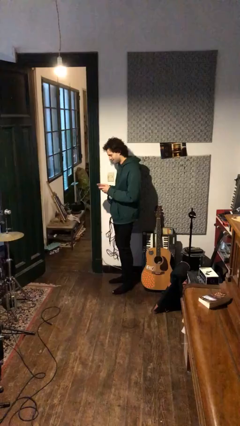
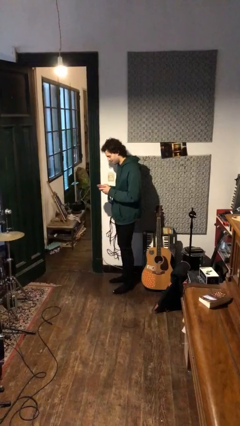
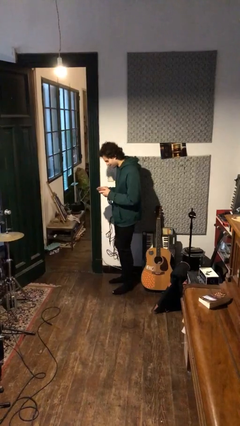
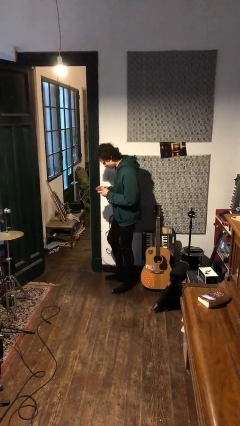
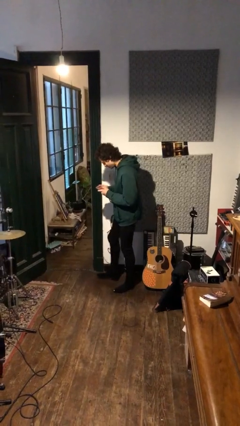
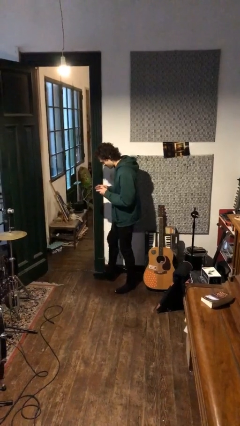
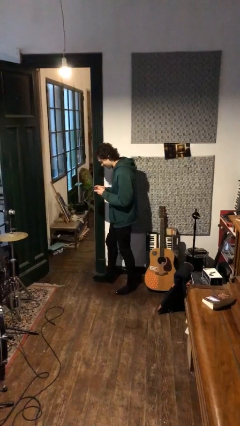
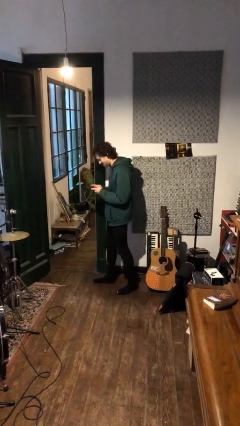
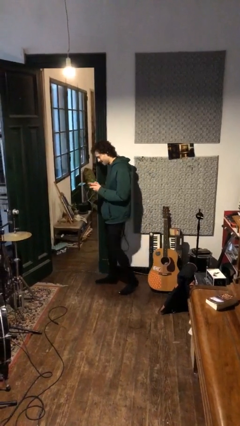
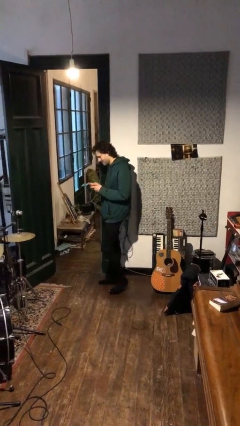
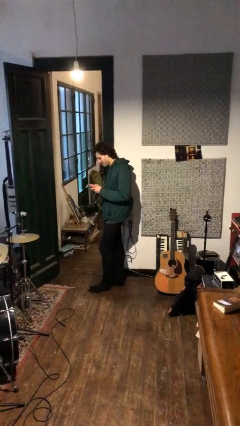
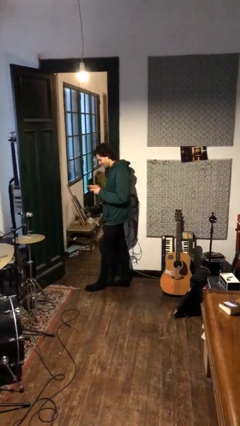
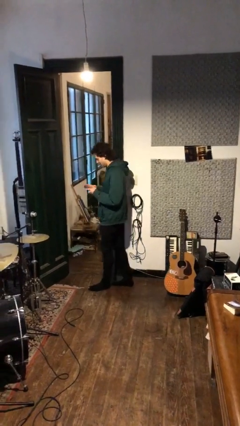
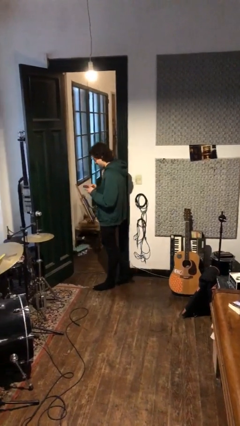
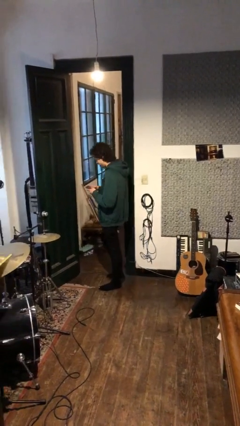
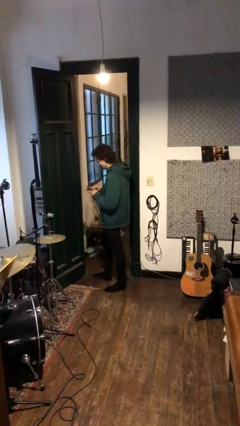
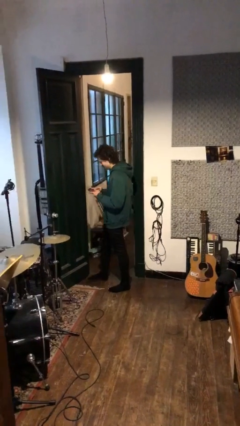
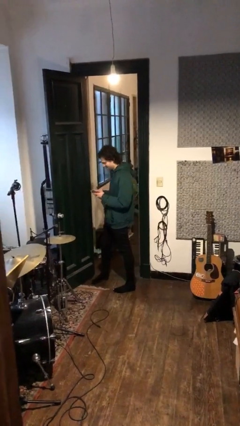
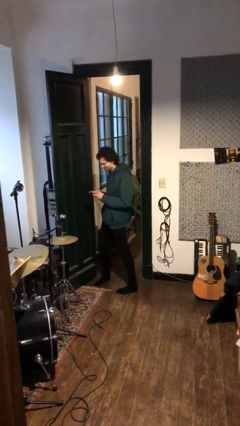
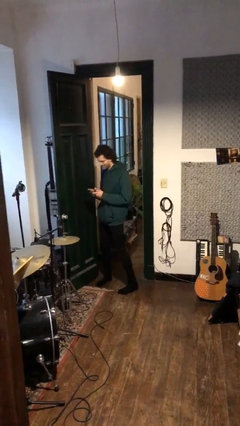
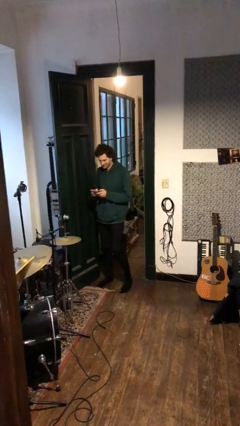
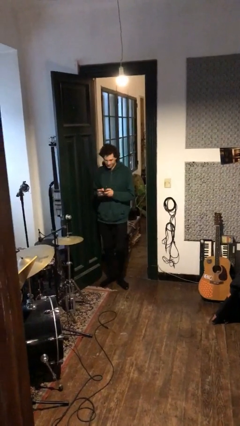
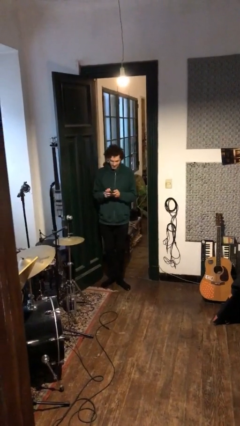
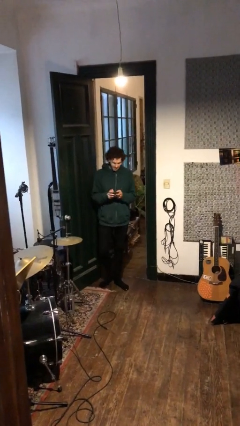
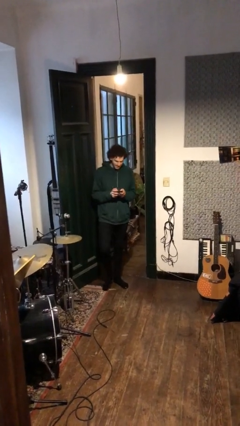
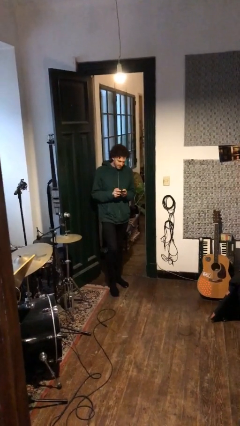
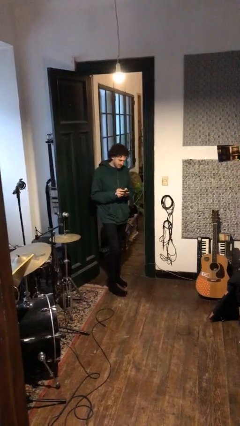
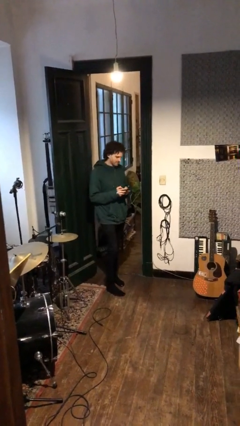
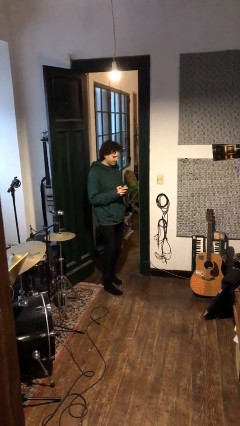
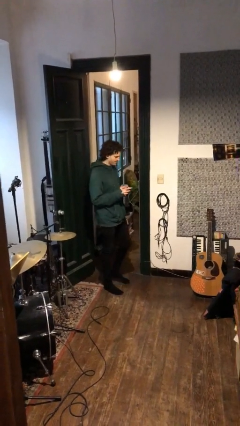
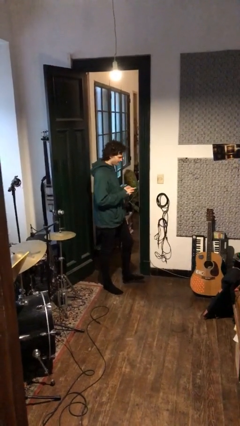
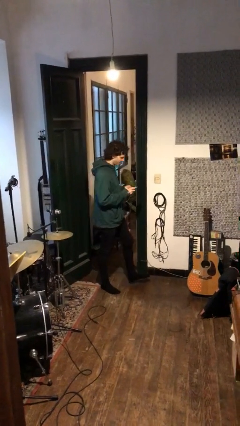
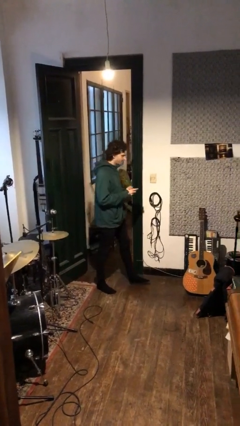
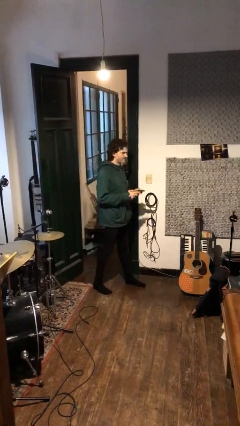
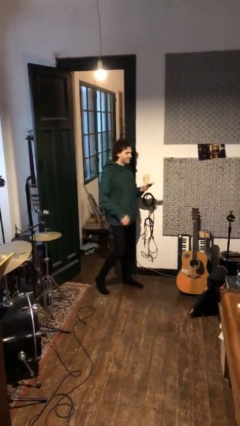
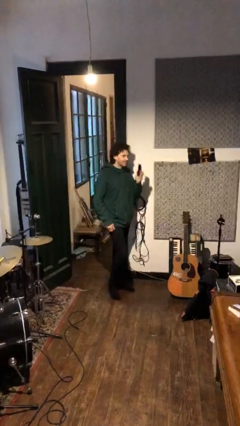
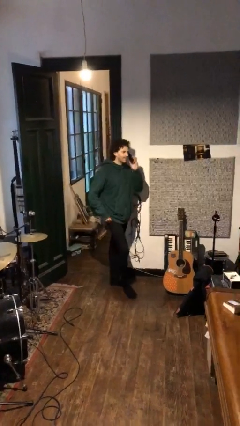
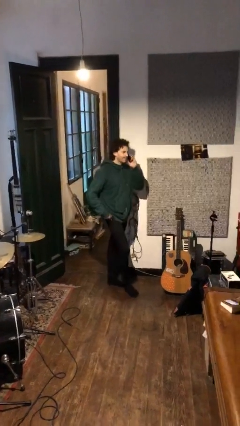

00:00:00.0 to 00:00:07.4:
person texts on phone

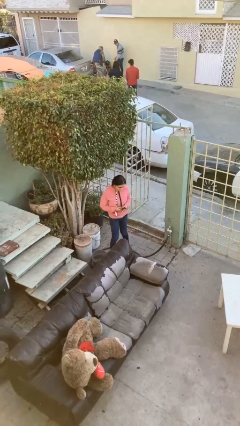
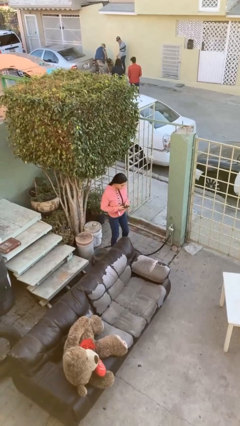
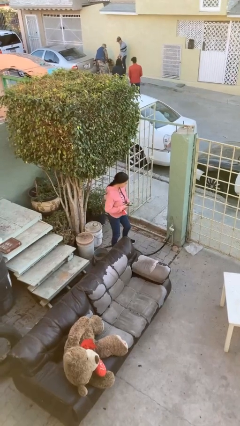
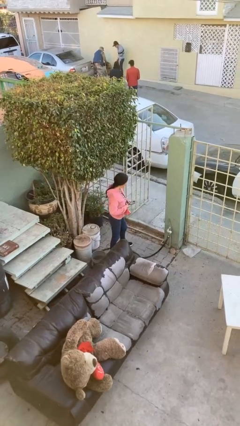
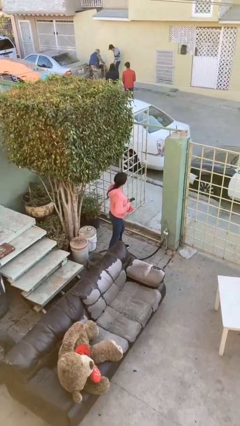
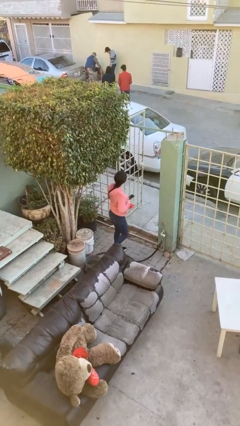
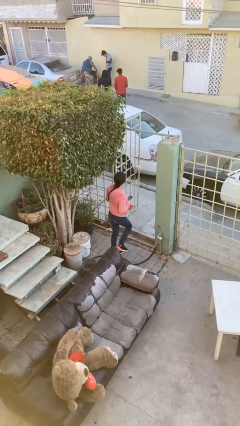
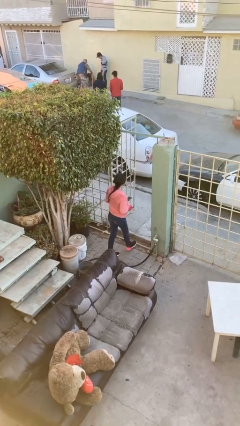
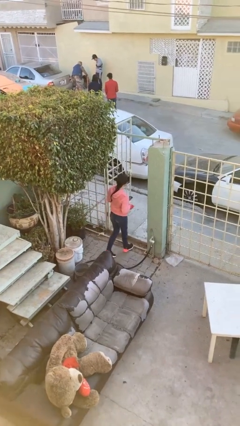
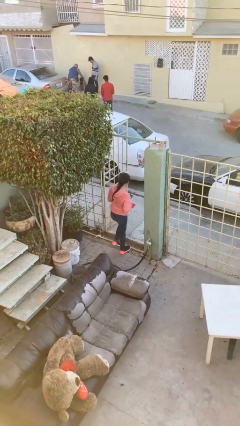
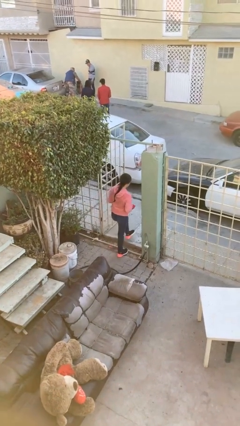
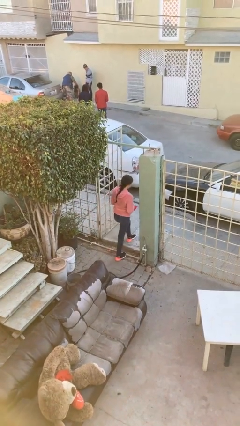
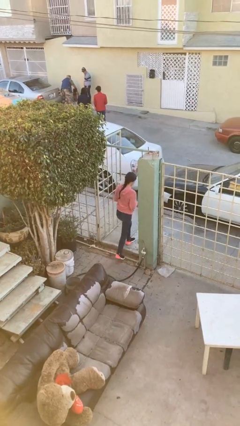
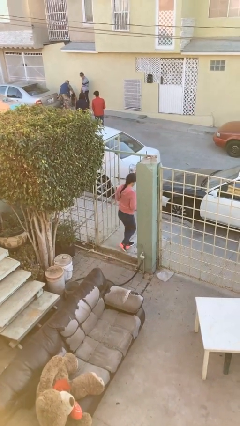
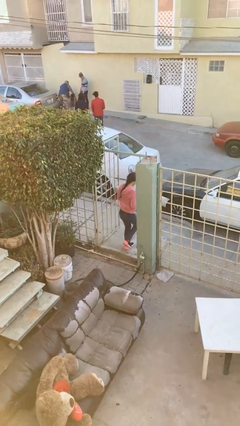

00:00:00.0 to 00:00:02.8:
person exits scene through structure

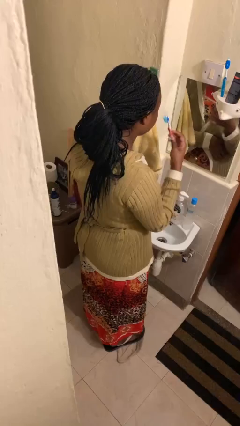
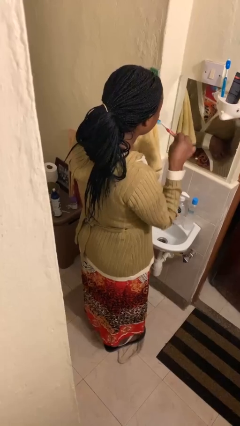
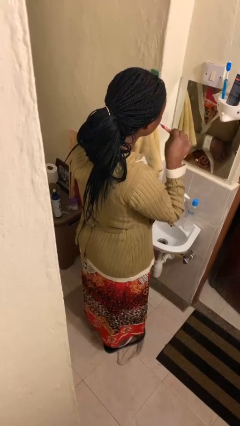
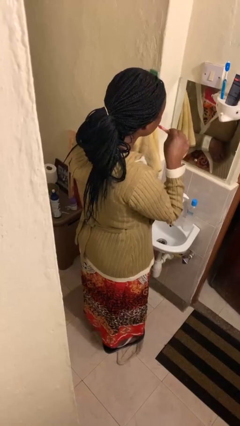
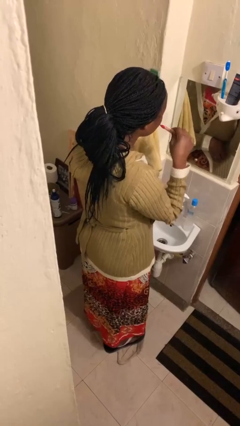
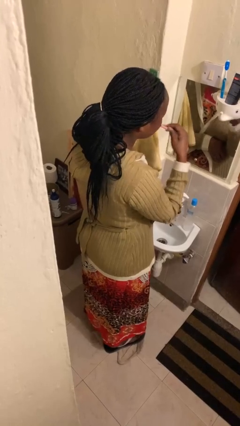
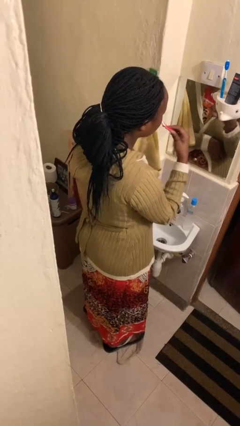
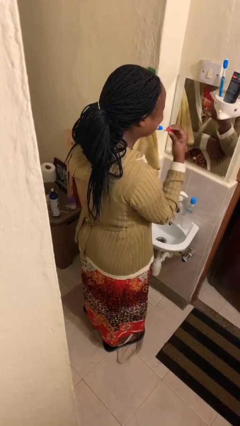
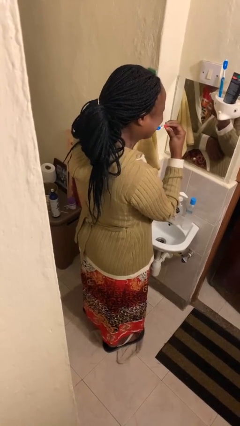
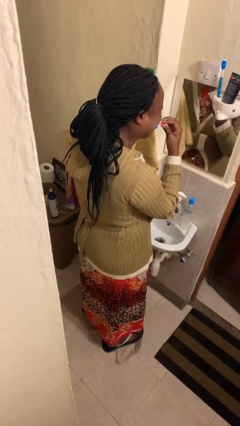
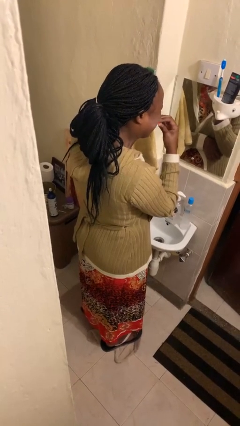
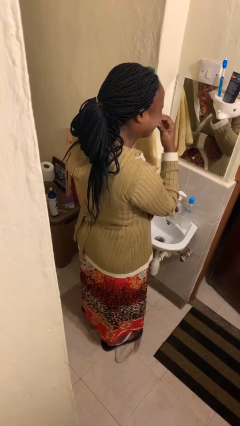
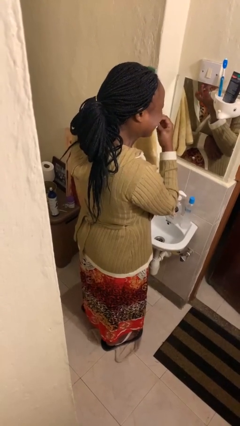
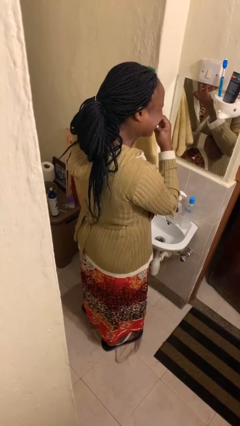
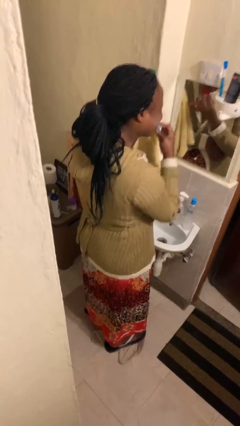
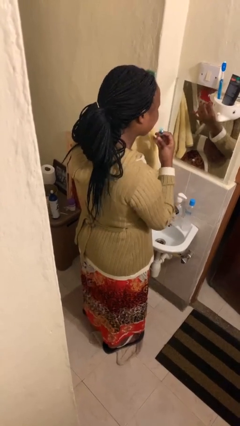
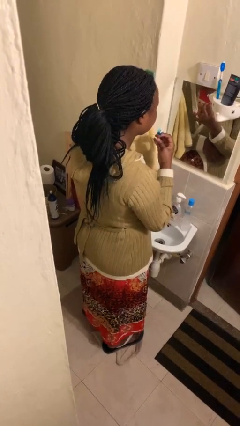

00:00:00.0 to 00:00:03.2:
person brushes teeth

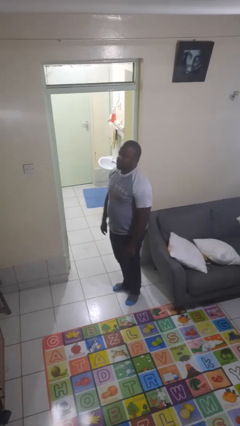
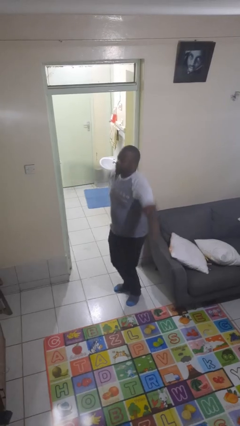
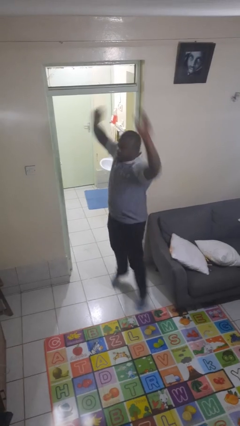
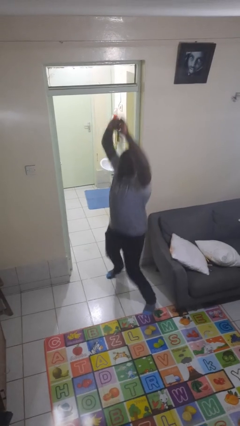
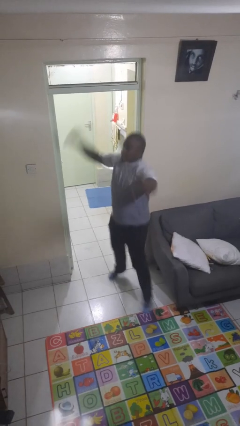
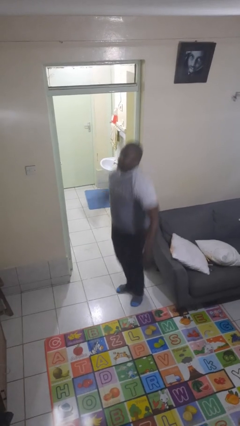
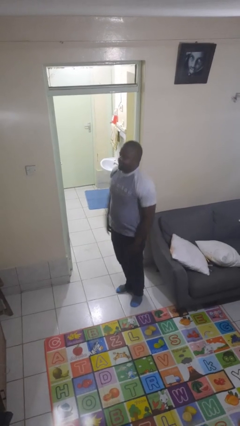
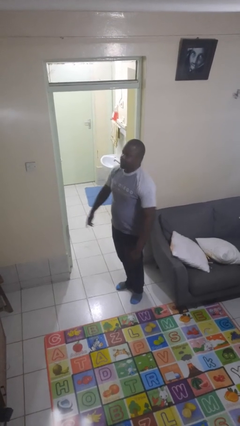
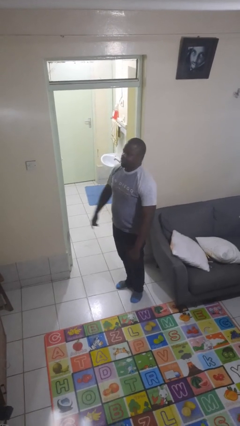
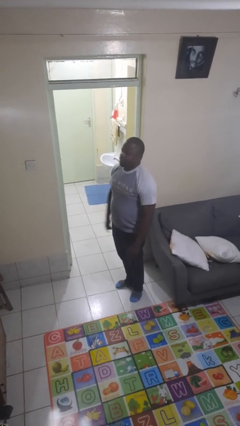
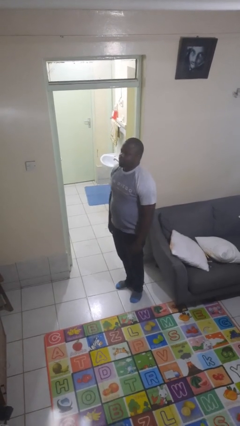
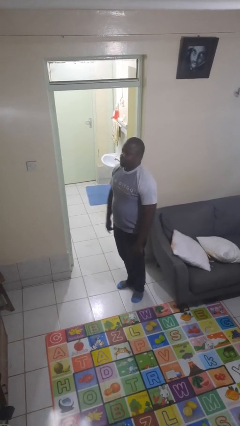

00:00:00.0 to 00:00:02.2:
person exercises with jumping jacks

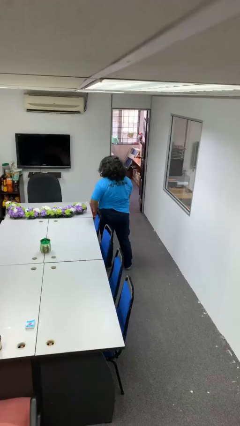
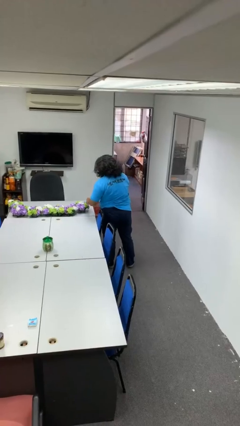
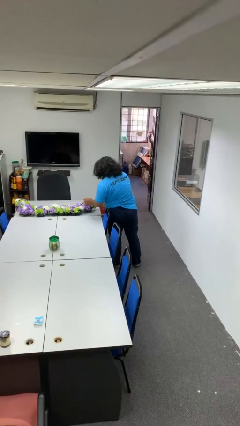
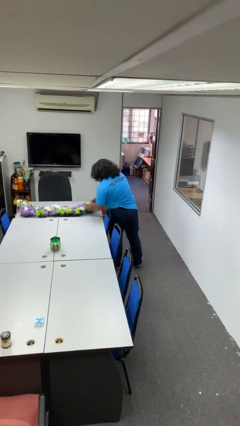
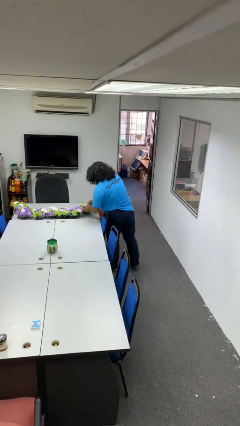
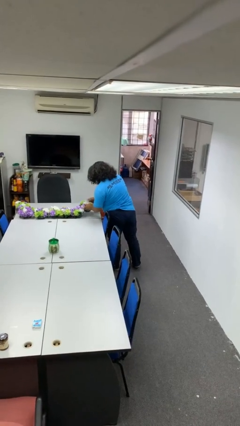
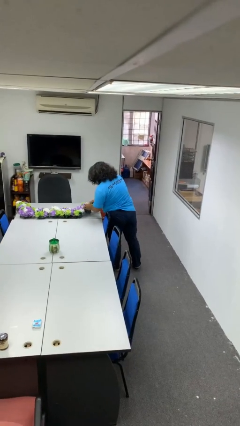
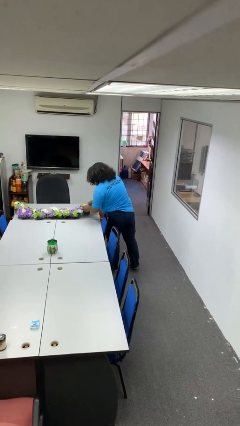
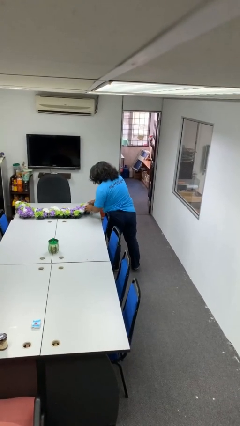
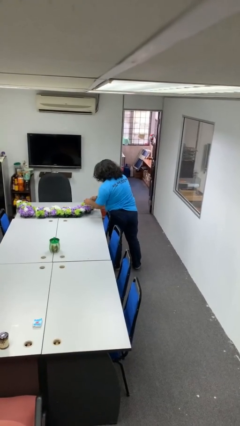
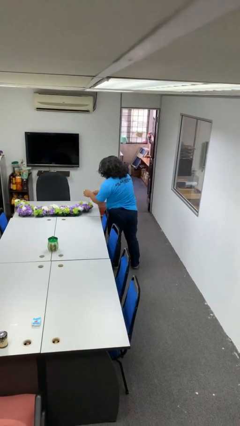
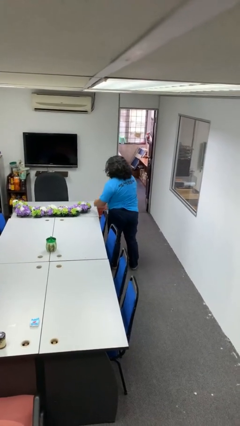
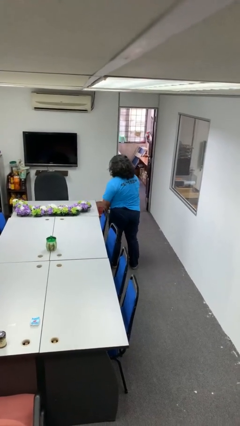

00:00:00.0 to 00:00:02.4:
person arranges flowers in vase
